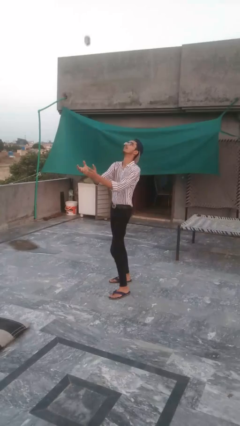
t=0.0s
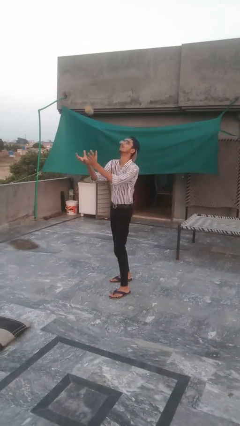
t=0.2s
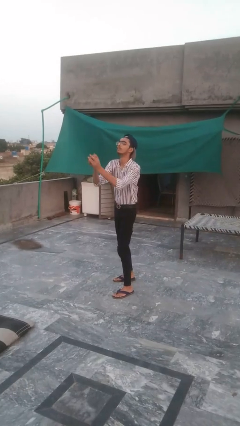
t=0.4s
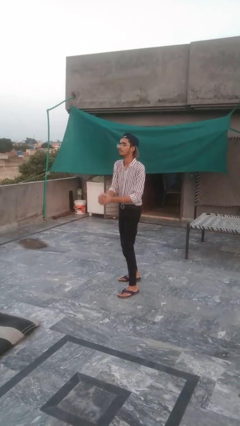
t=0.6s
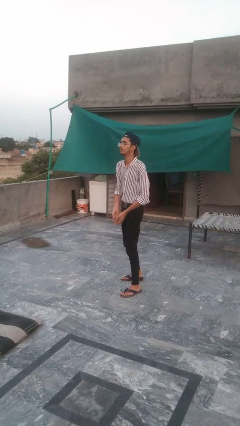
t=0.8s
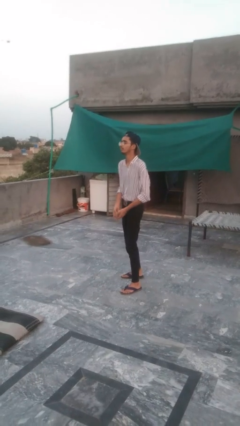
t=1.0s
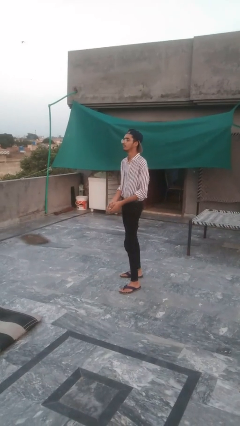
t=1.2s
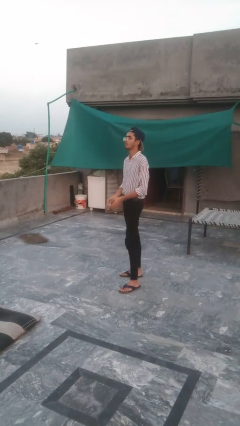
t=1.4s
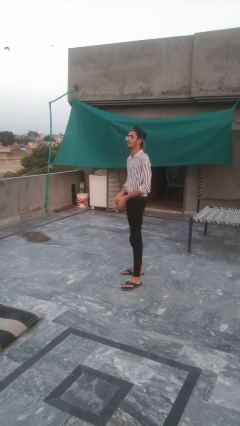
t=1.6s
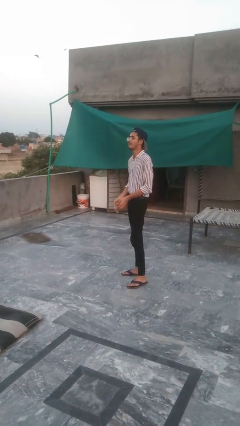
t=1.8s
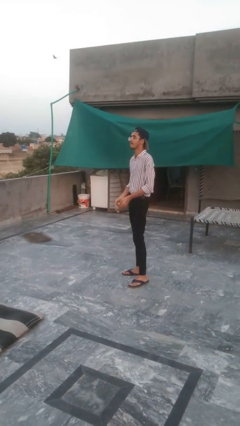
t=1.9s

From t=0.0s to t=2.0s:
person catches dropped object

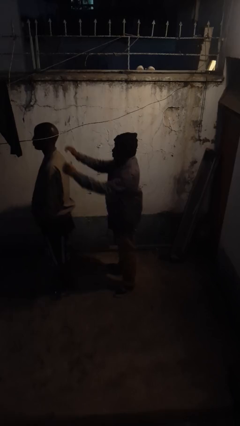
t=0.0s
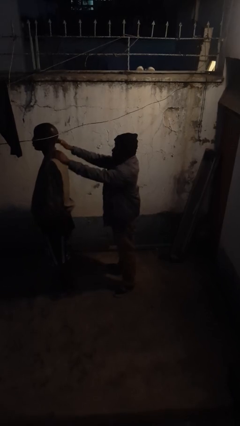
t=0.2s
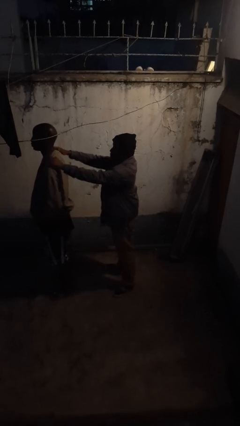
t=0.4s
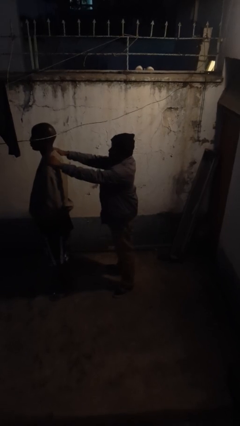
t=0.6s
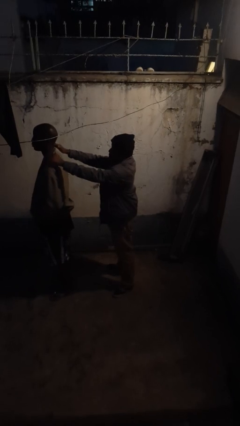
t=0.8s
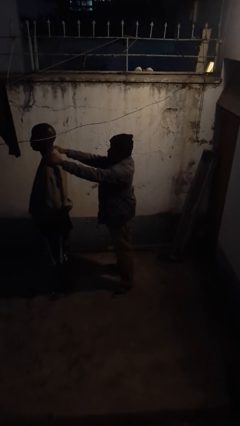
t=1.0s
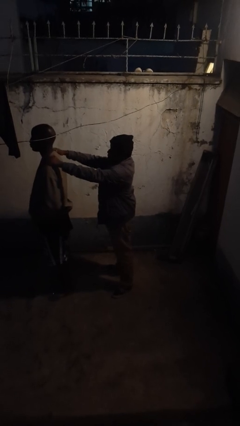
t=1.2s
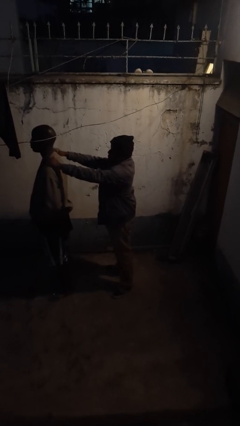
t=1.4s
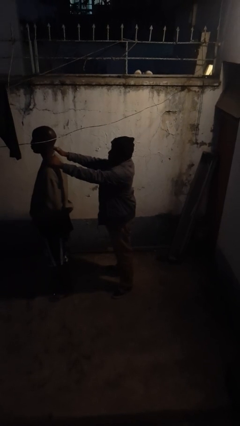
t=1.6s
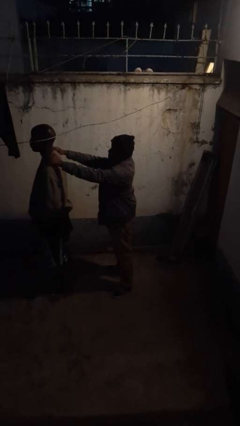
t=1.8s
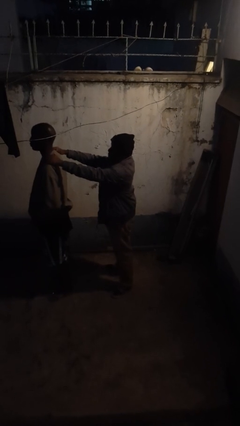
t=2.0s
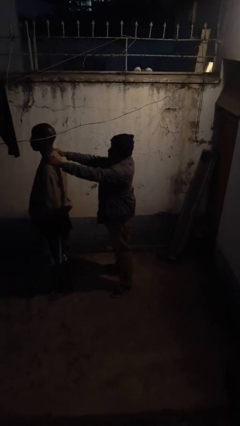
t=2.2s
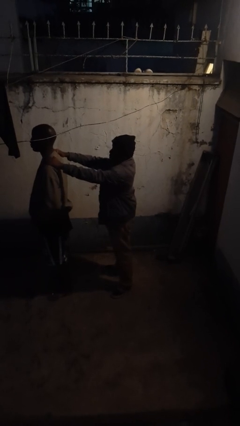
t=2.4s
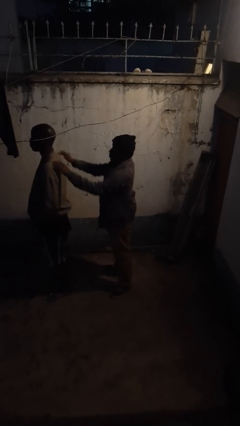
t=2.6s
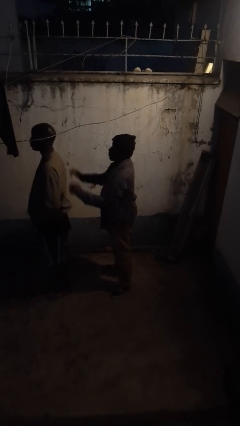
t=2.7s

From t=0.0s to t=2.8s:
person pounds shoulders of person

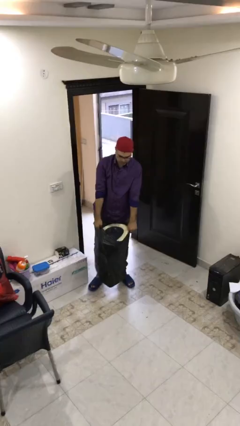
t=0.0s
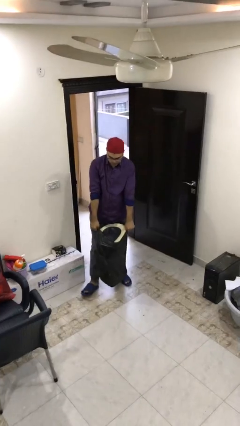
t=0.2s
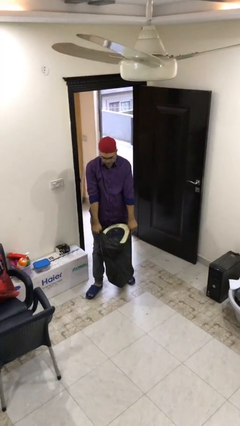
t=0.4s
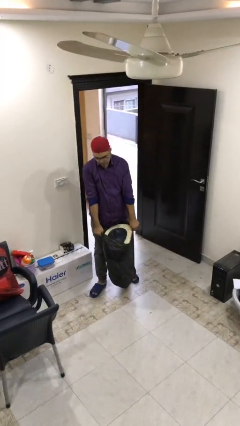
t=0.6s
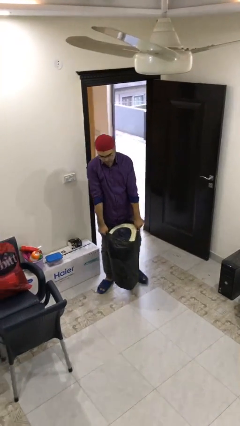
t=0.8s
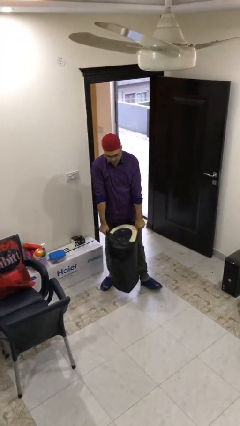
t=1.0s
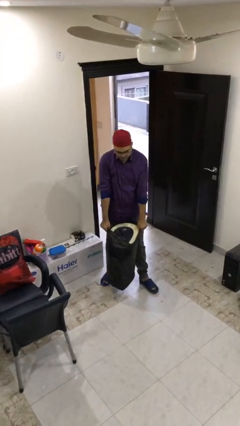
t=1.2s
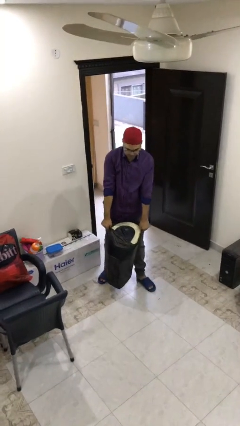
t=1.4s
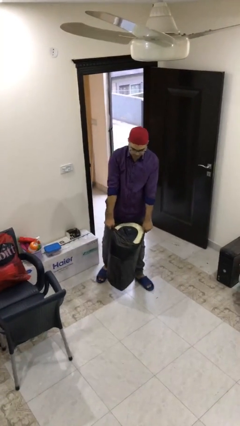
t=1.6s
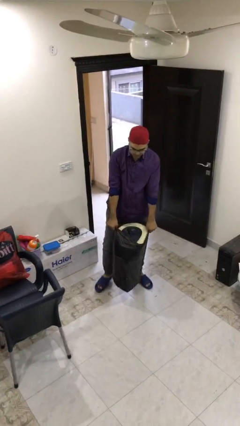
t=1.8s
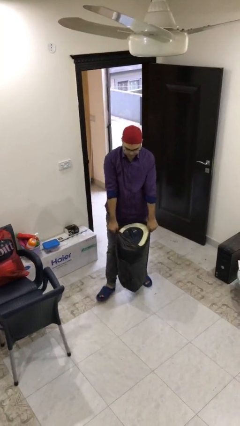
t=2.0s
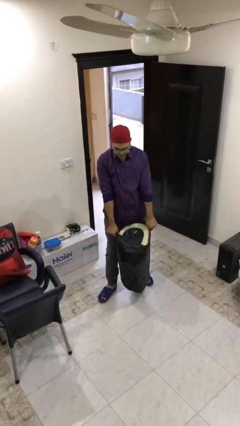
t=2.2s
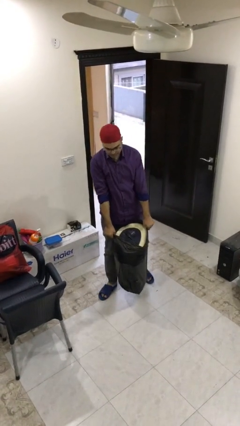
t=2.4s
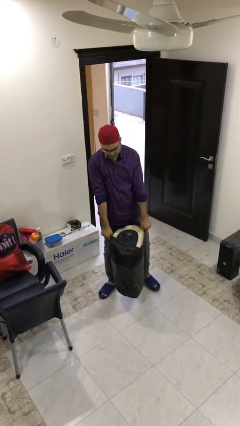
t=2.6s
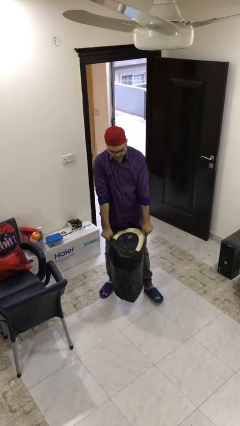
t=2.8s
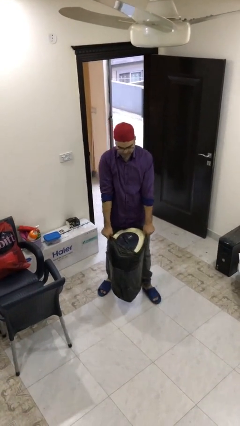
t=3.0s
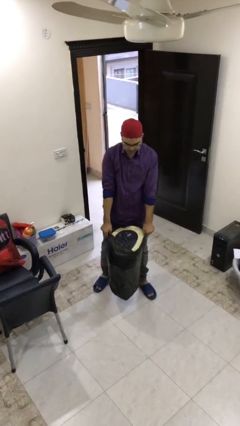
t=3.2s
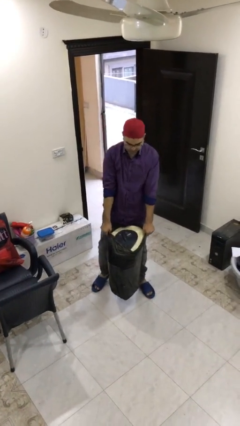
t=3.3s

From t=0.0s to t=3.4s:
person carries heavy object

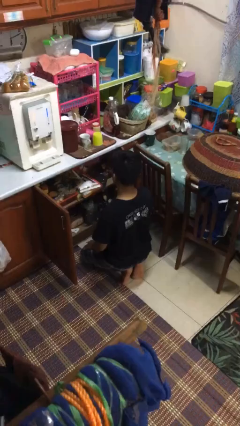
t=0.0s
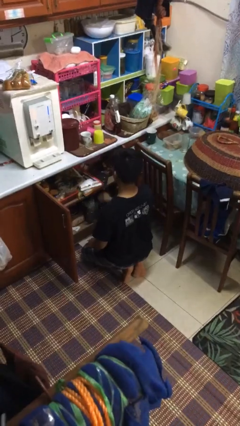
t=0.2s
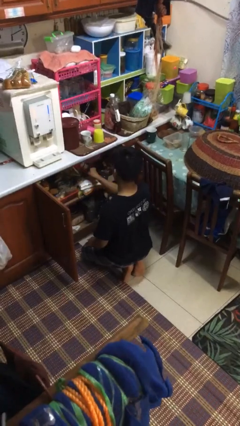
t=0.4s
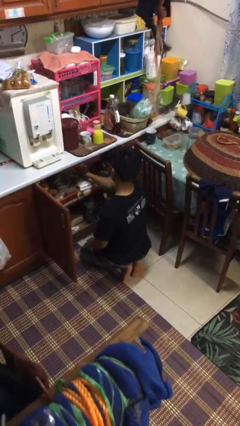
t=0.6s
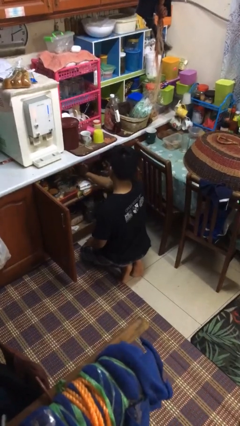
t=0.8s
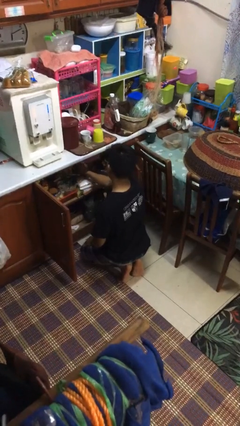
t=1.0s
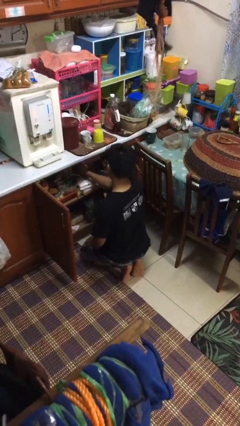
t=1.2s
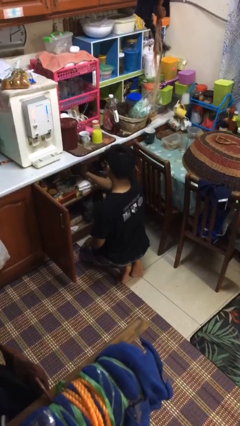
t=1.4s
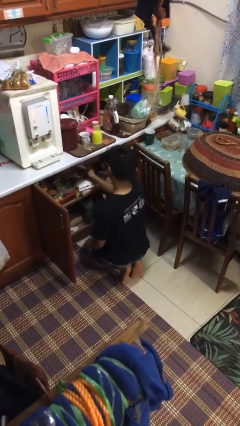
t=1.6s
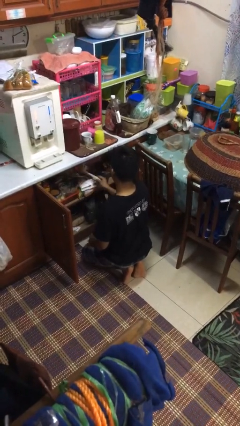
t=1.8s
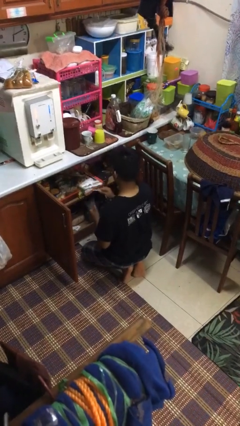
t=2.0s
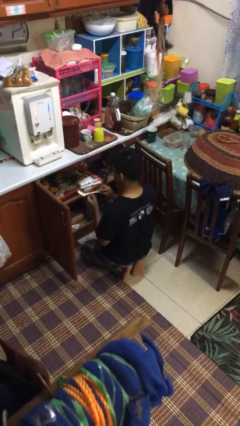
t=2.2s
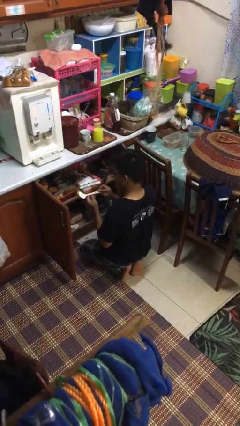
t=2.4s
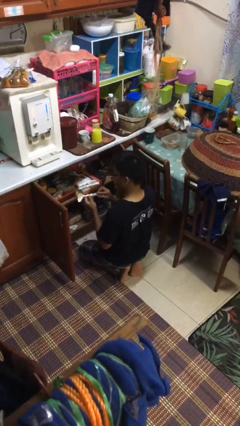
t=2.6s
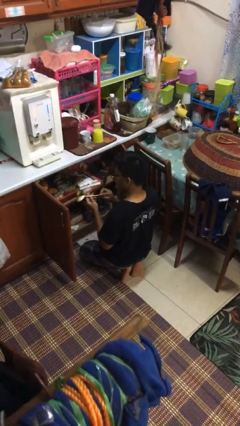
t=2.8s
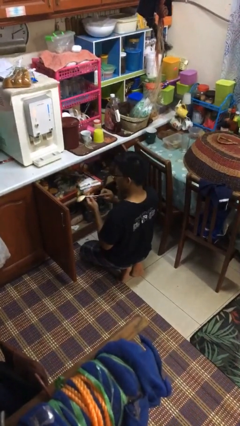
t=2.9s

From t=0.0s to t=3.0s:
person takes object from kitchen drawer

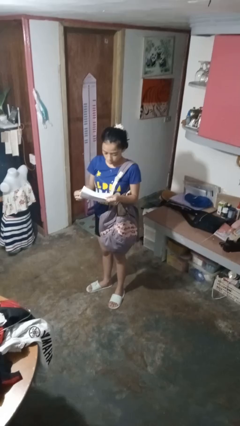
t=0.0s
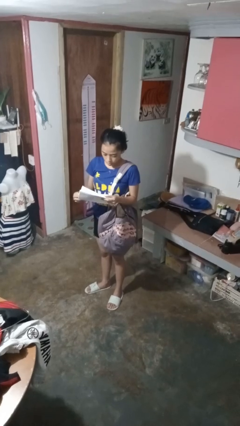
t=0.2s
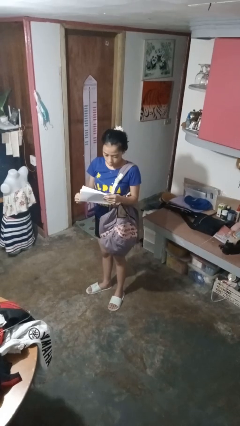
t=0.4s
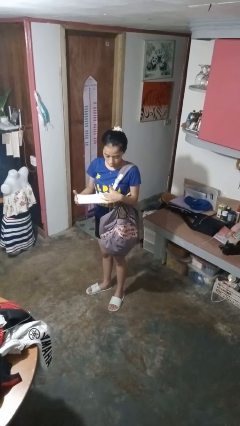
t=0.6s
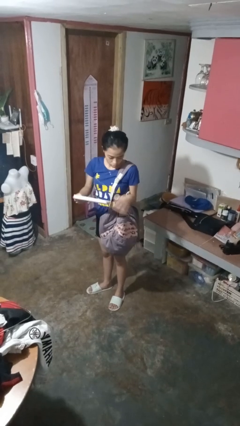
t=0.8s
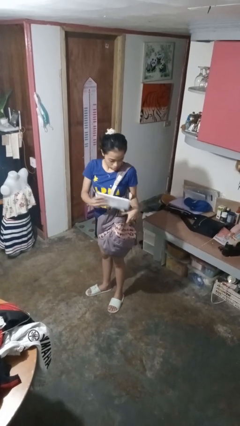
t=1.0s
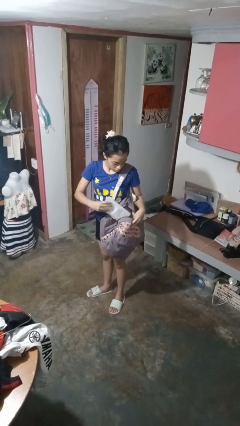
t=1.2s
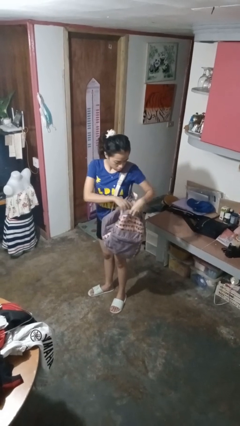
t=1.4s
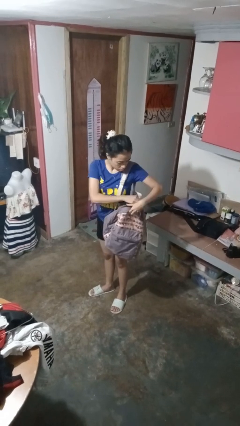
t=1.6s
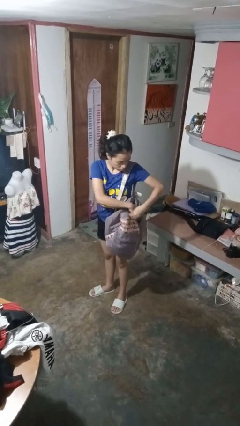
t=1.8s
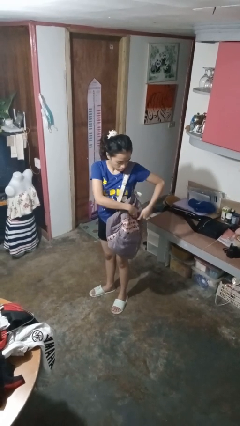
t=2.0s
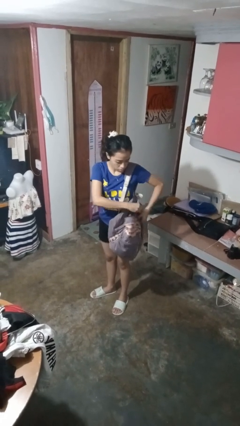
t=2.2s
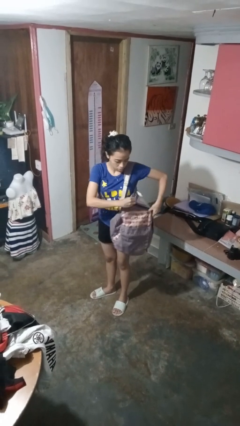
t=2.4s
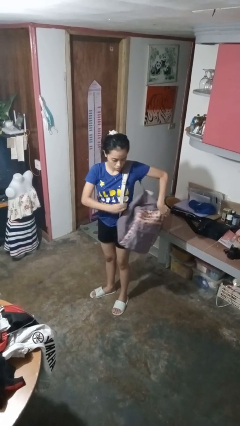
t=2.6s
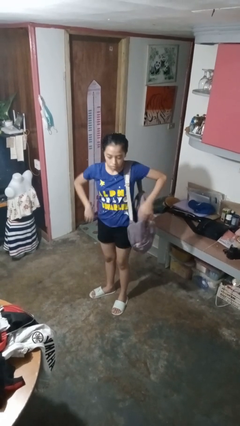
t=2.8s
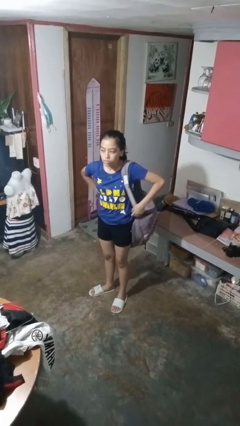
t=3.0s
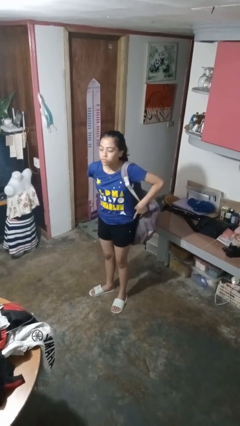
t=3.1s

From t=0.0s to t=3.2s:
person puts object into backpack

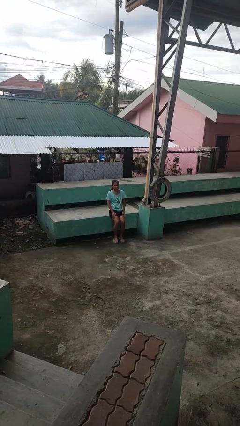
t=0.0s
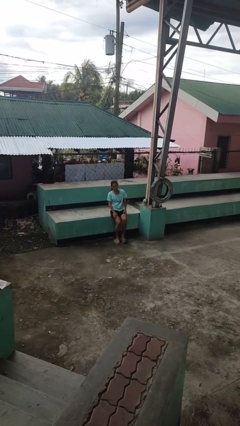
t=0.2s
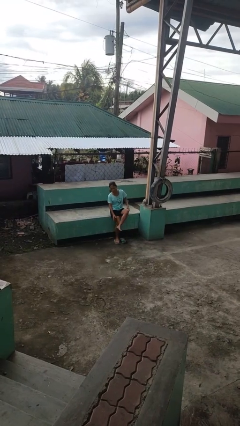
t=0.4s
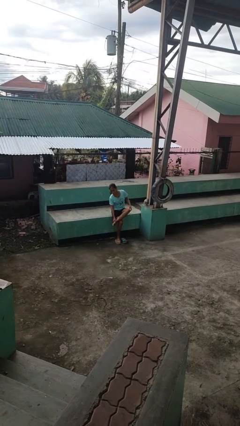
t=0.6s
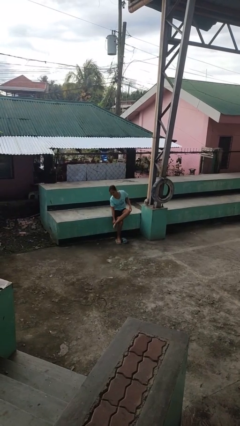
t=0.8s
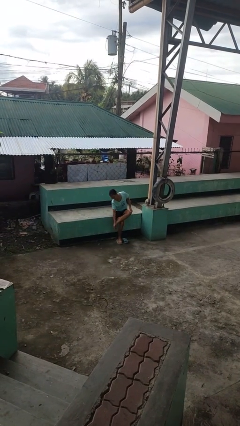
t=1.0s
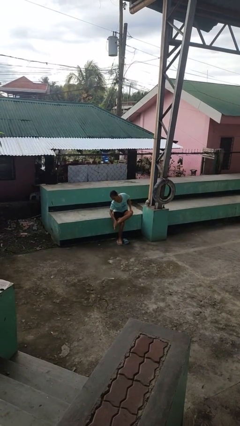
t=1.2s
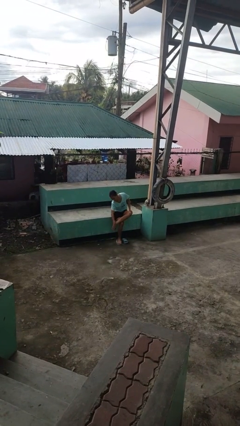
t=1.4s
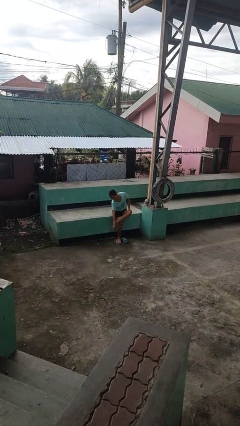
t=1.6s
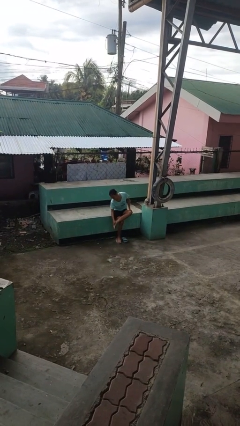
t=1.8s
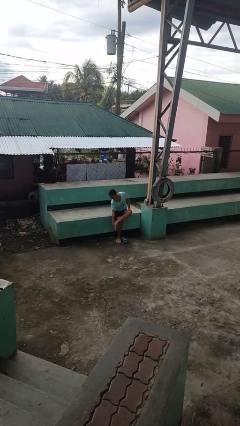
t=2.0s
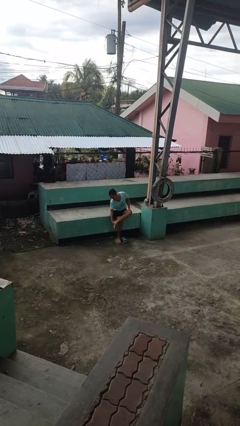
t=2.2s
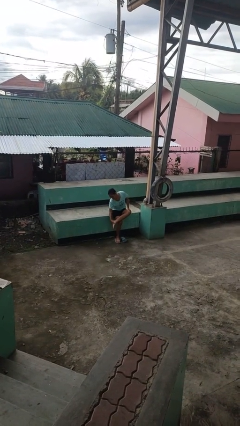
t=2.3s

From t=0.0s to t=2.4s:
person rubs foot

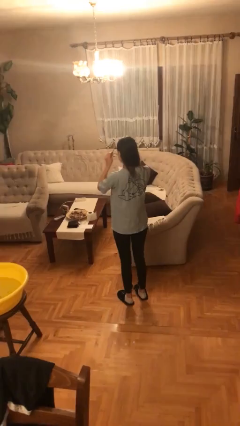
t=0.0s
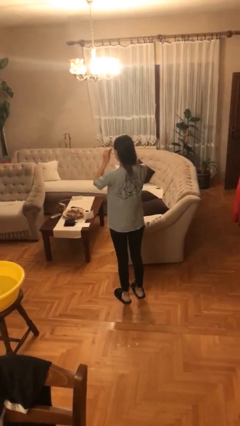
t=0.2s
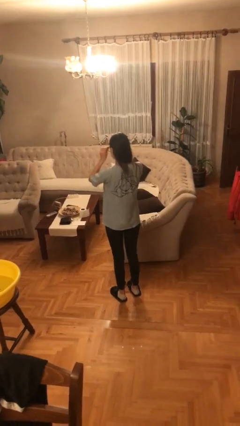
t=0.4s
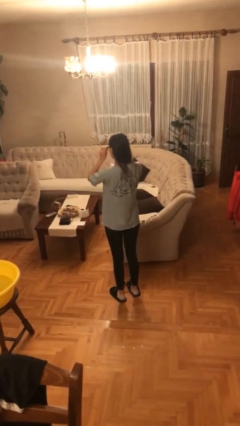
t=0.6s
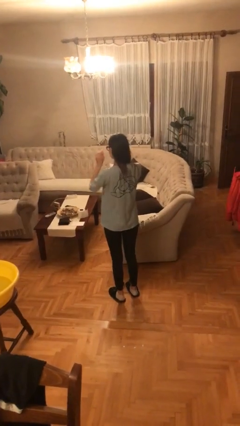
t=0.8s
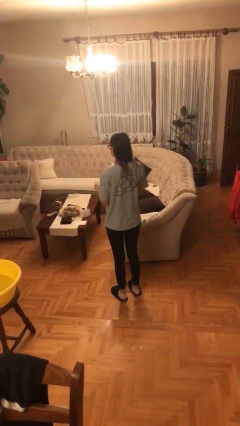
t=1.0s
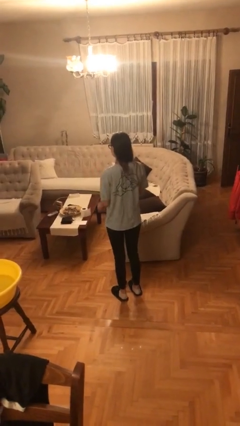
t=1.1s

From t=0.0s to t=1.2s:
person puts on glasses
